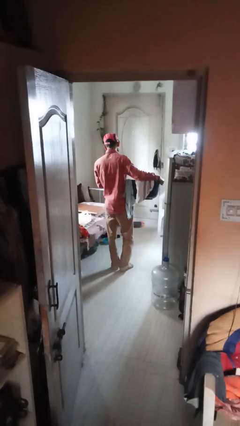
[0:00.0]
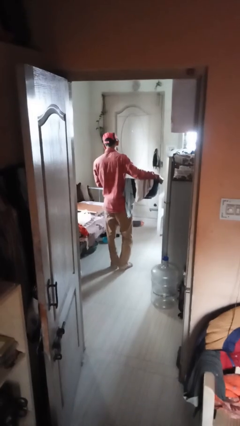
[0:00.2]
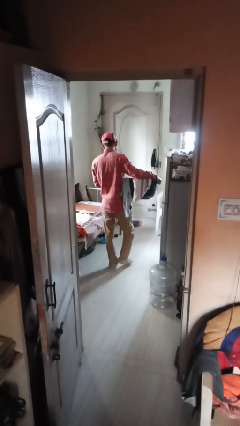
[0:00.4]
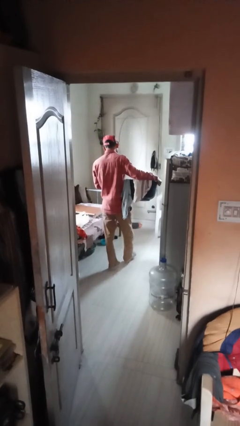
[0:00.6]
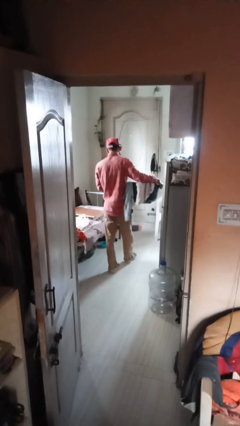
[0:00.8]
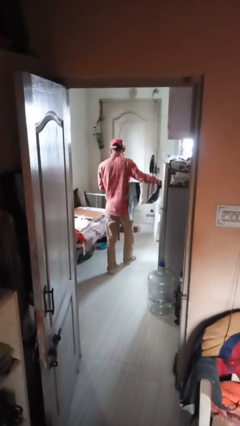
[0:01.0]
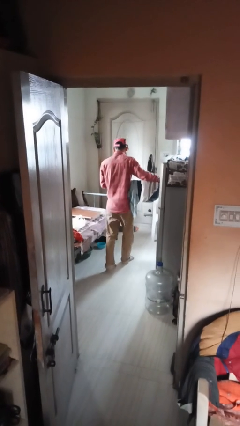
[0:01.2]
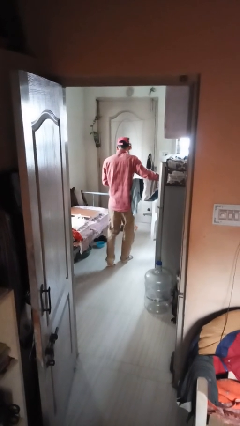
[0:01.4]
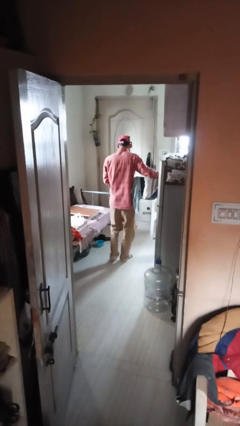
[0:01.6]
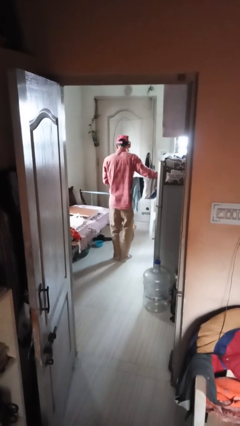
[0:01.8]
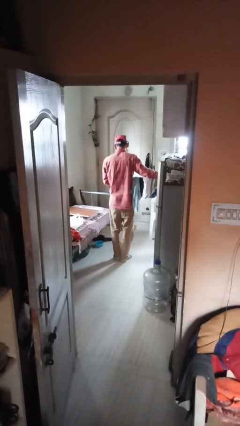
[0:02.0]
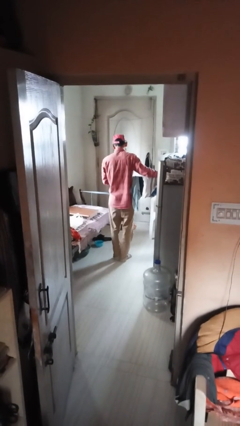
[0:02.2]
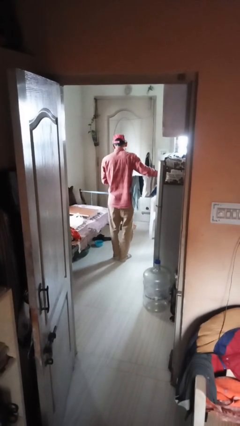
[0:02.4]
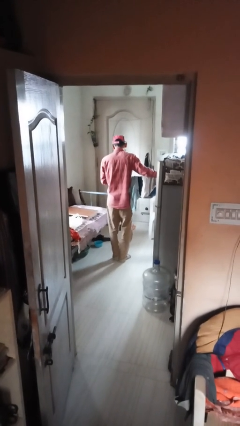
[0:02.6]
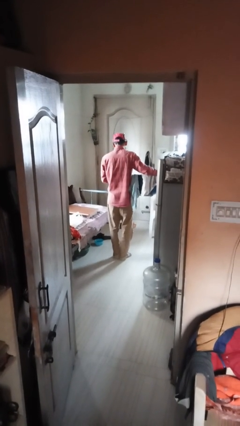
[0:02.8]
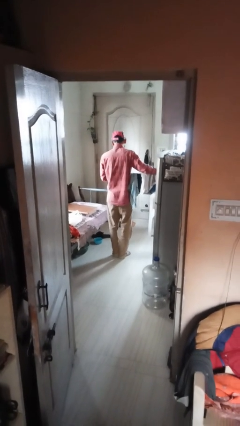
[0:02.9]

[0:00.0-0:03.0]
person carries laundry basket

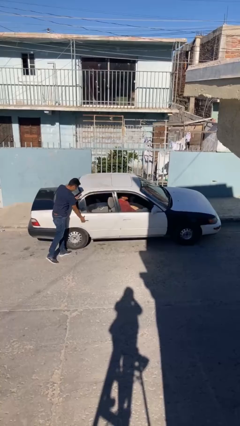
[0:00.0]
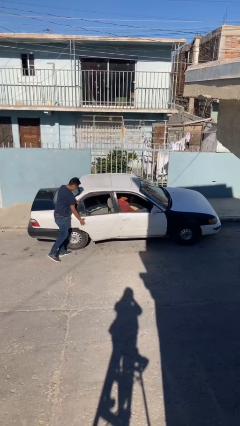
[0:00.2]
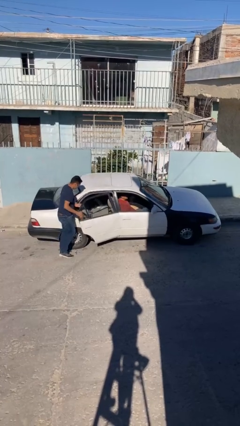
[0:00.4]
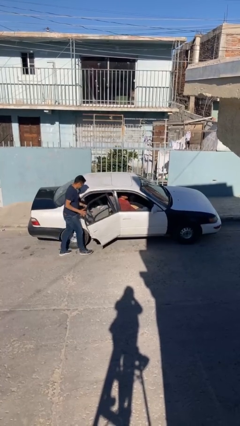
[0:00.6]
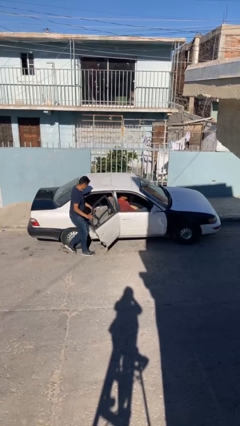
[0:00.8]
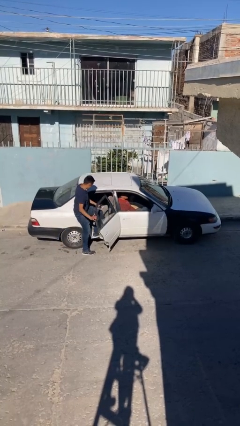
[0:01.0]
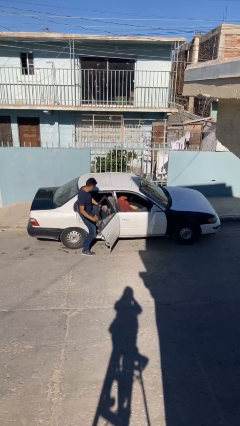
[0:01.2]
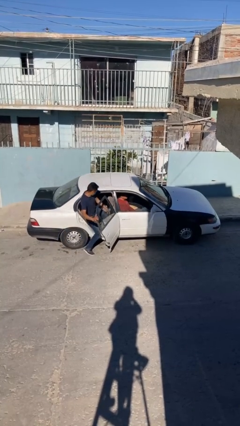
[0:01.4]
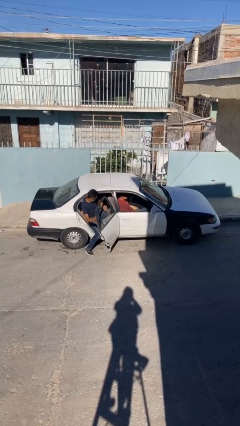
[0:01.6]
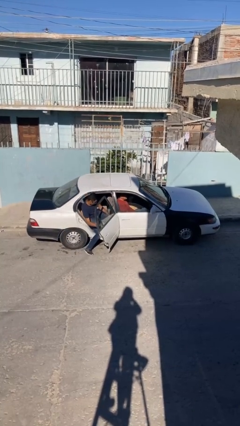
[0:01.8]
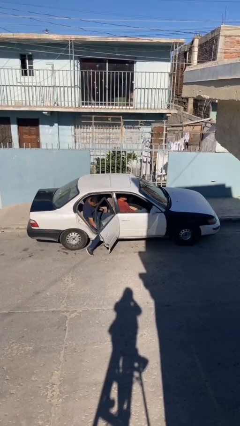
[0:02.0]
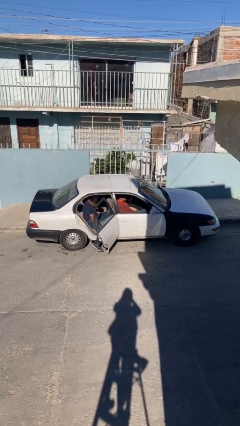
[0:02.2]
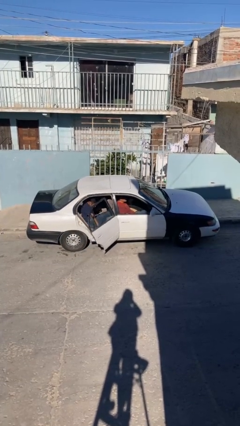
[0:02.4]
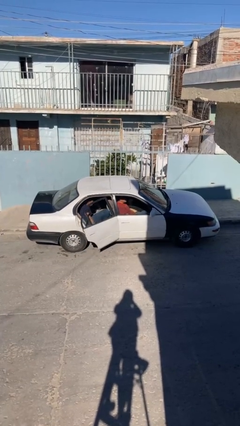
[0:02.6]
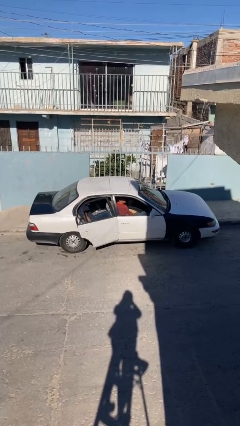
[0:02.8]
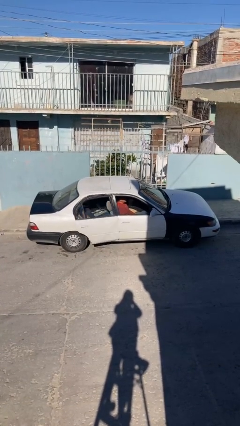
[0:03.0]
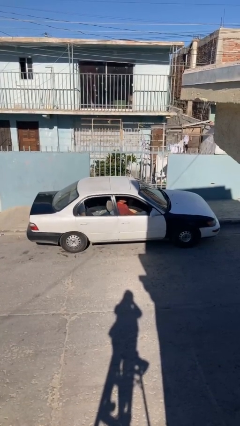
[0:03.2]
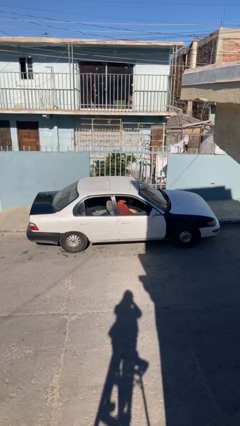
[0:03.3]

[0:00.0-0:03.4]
car picks up person

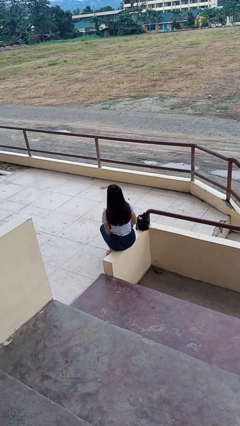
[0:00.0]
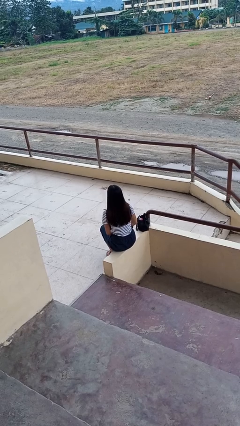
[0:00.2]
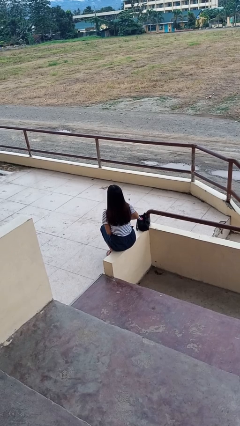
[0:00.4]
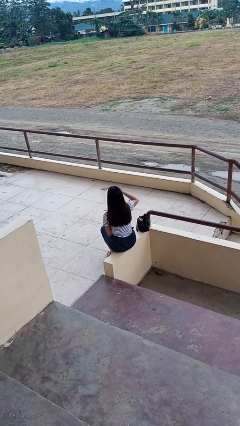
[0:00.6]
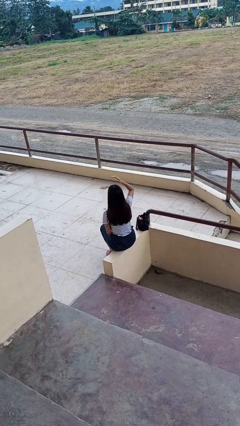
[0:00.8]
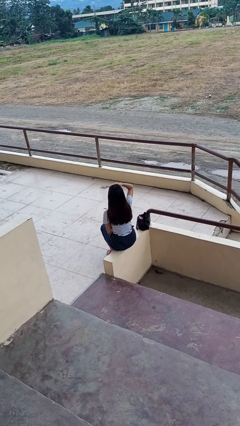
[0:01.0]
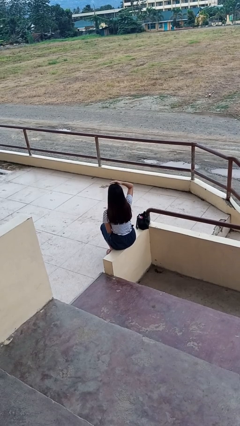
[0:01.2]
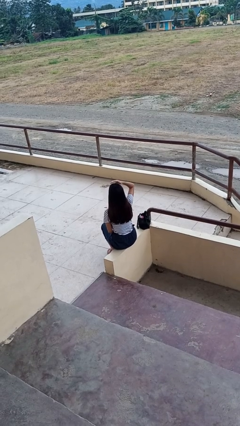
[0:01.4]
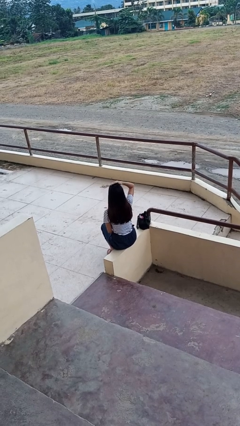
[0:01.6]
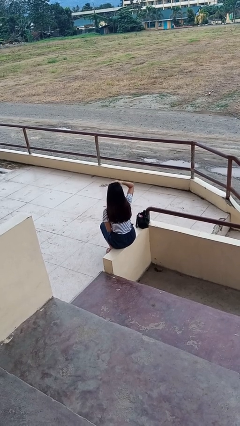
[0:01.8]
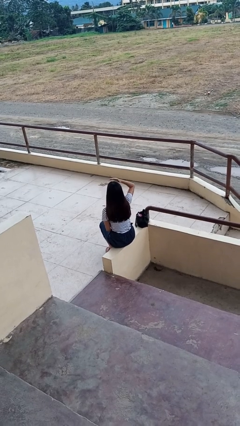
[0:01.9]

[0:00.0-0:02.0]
person pats head

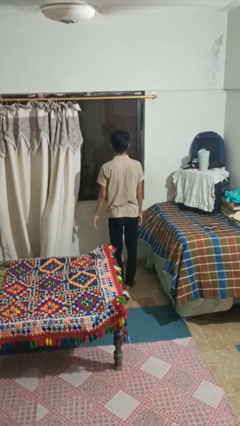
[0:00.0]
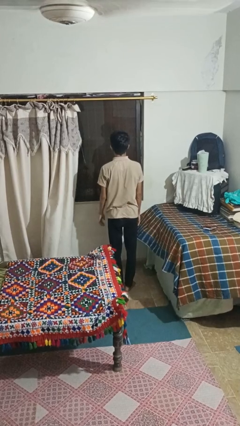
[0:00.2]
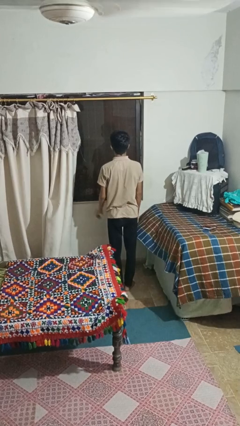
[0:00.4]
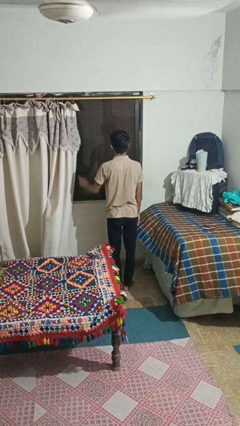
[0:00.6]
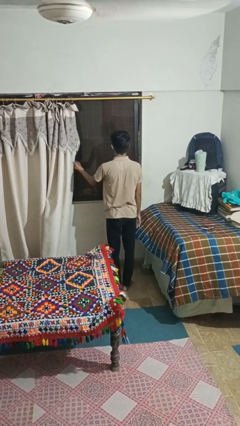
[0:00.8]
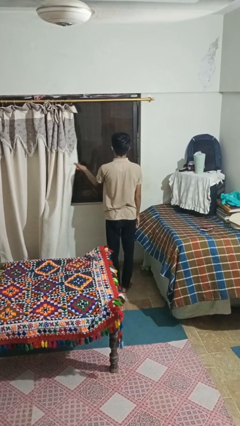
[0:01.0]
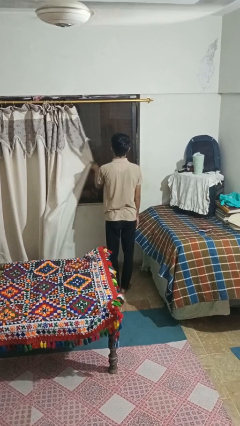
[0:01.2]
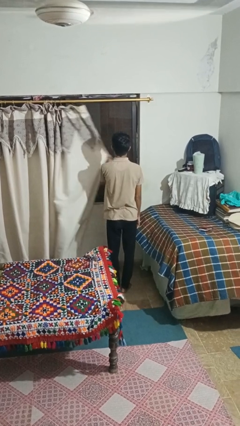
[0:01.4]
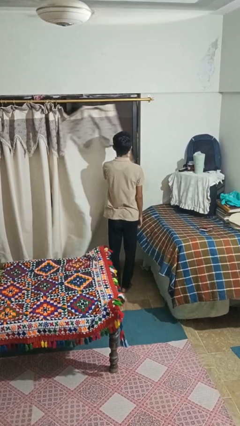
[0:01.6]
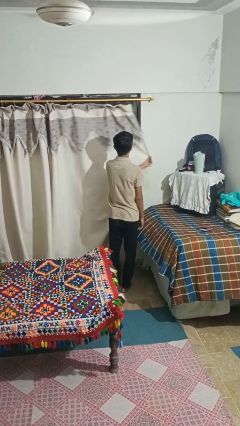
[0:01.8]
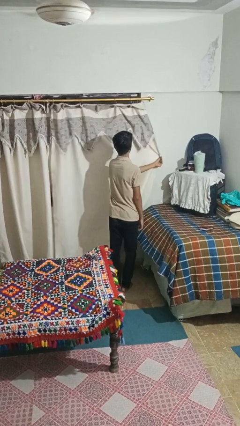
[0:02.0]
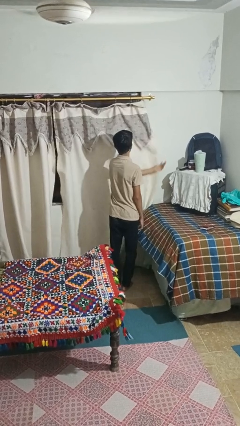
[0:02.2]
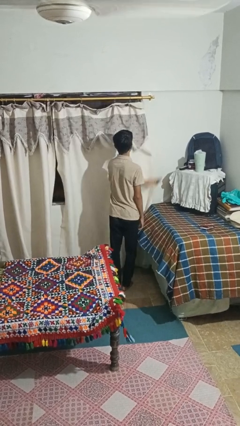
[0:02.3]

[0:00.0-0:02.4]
person closes curtains

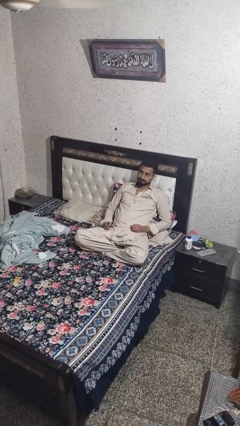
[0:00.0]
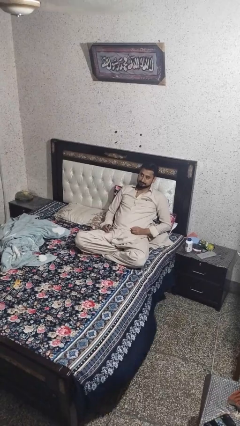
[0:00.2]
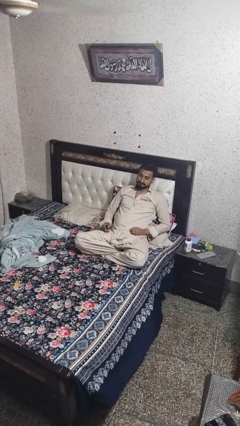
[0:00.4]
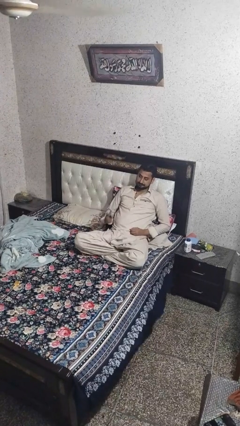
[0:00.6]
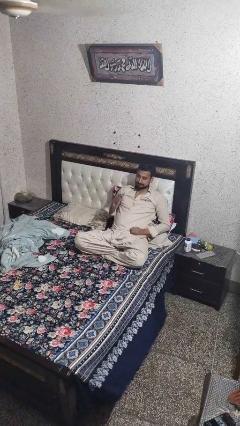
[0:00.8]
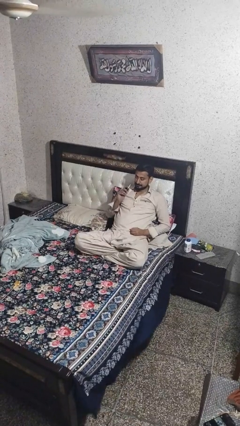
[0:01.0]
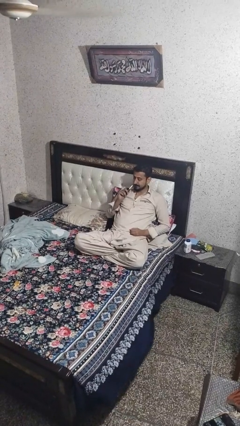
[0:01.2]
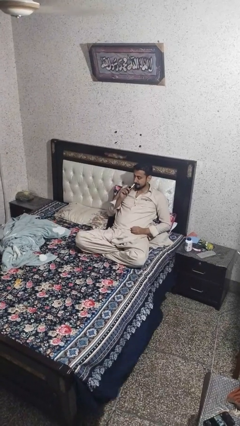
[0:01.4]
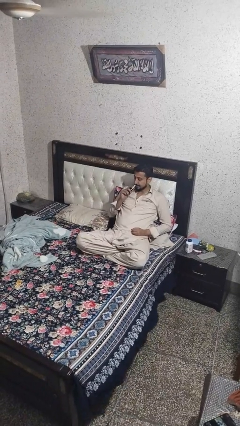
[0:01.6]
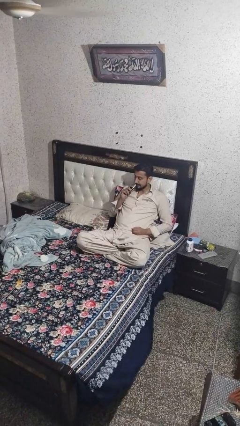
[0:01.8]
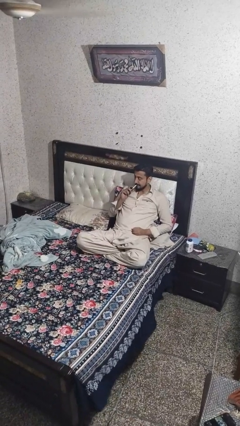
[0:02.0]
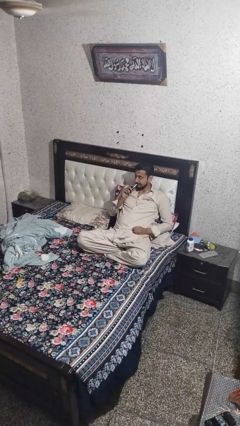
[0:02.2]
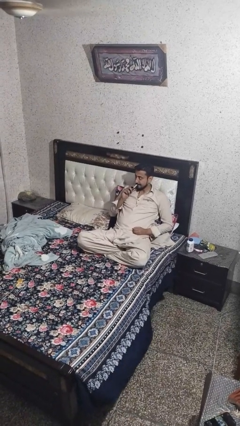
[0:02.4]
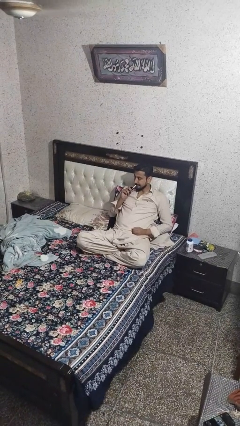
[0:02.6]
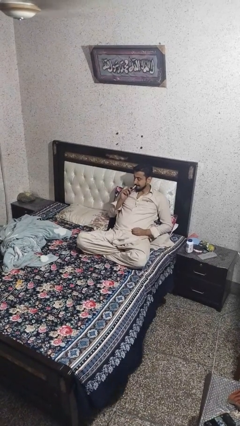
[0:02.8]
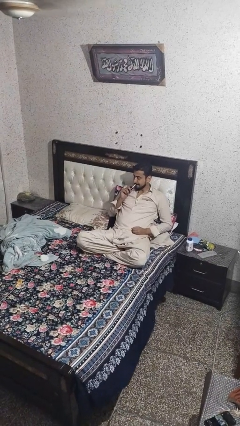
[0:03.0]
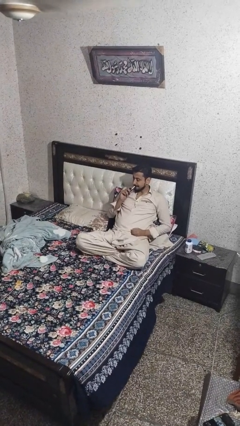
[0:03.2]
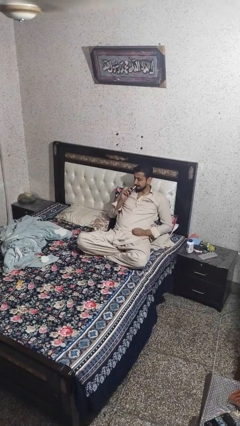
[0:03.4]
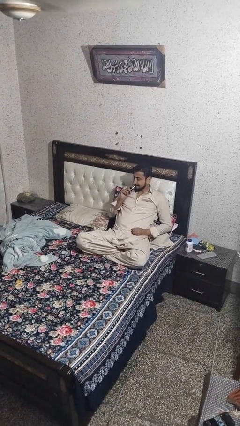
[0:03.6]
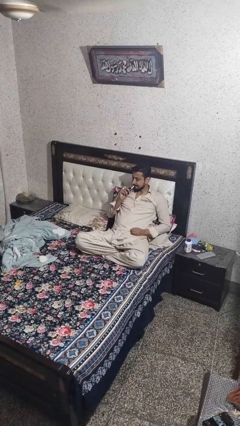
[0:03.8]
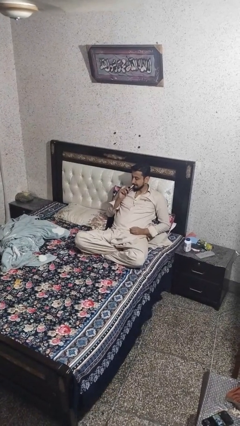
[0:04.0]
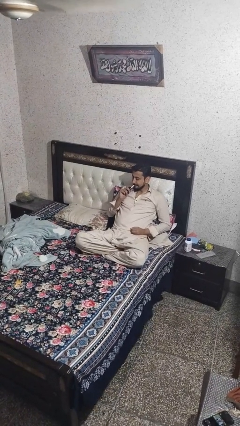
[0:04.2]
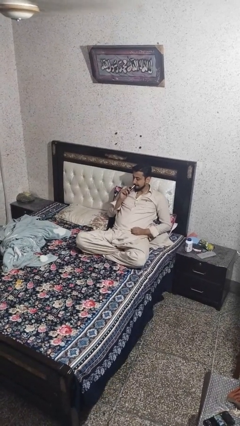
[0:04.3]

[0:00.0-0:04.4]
person vapes

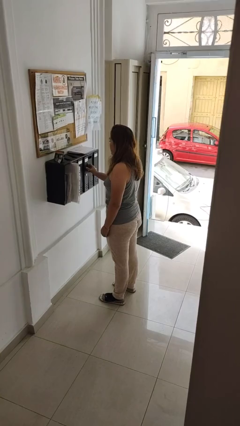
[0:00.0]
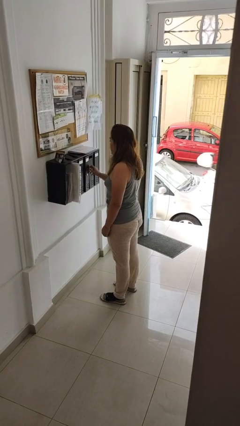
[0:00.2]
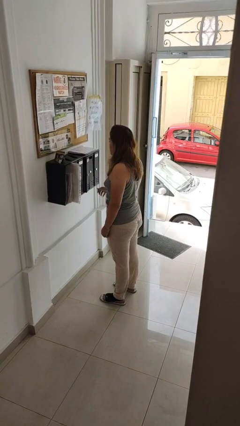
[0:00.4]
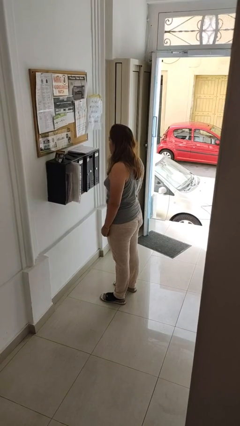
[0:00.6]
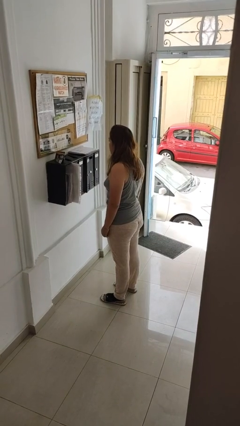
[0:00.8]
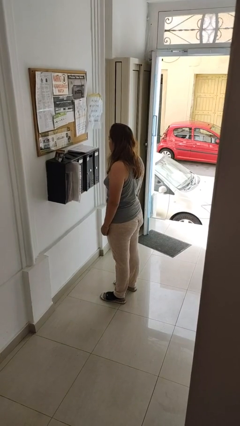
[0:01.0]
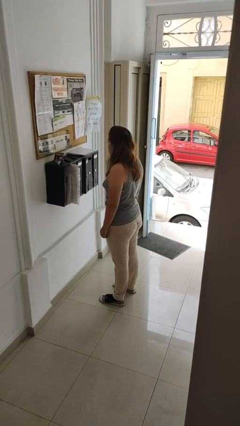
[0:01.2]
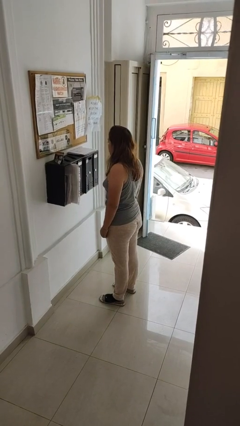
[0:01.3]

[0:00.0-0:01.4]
person closes mailbox

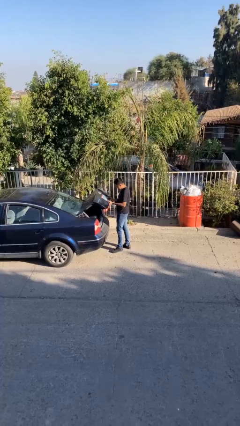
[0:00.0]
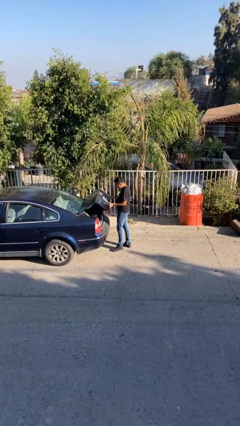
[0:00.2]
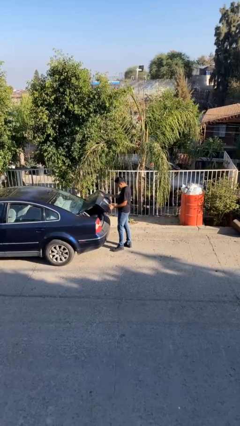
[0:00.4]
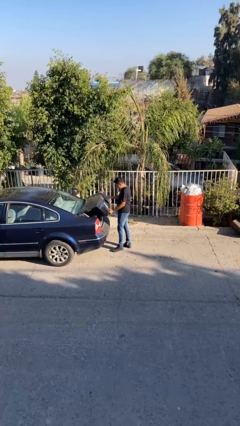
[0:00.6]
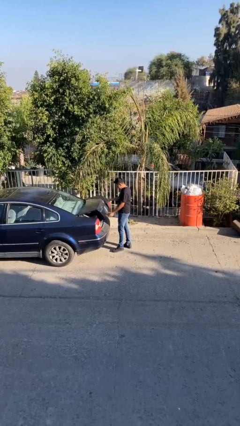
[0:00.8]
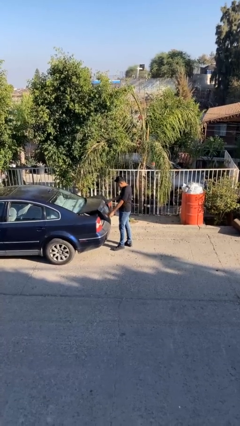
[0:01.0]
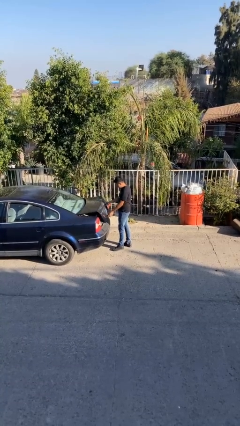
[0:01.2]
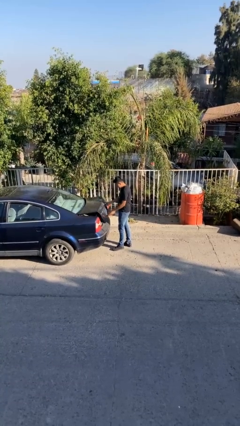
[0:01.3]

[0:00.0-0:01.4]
person closes car trunk
